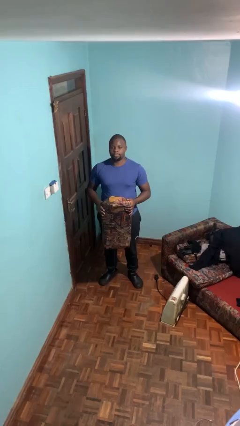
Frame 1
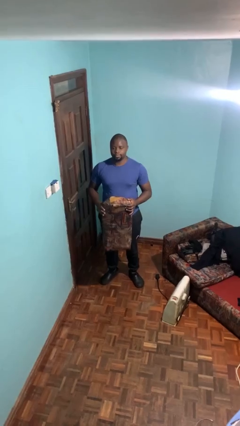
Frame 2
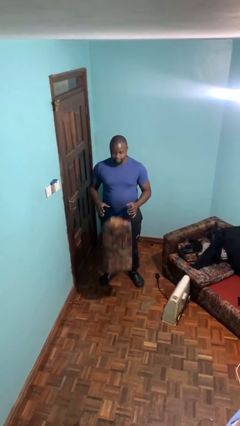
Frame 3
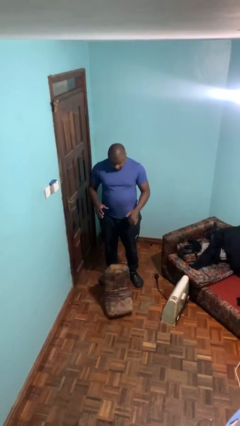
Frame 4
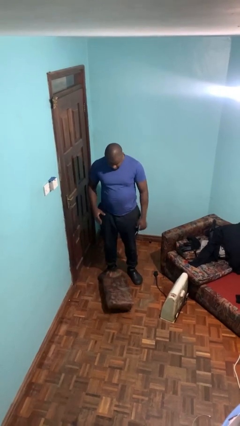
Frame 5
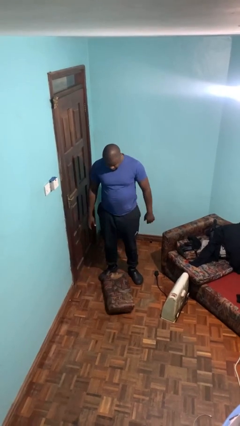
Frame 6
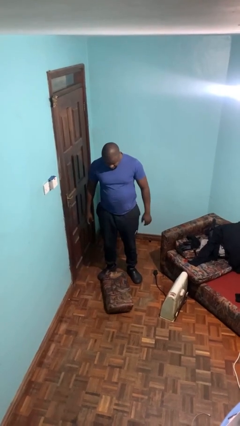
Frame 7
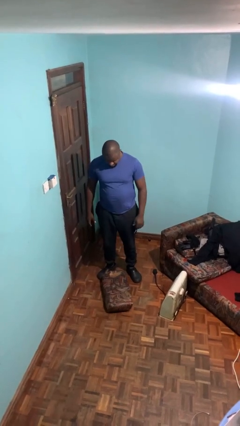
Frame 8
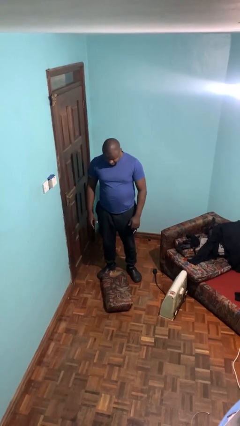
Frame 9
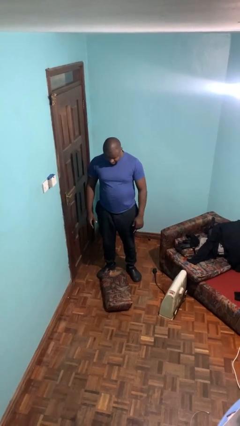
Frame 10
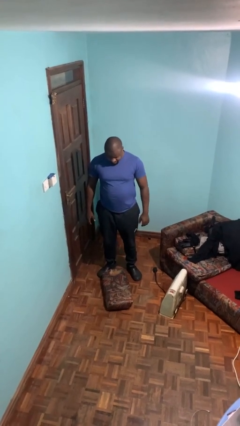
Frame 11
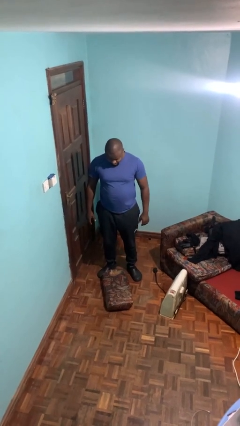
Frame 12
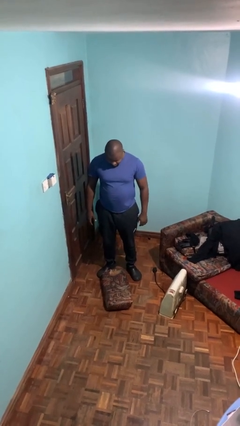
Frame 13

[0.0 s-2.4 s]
person drops object

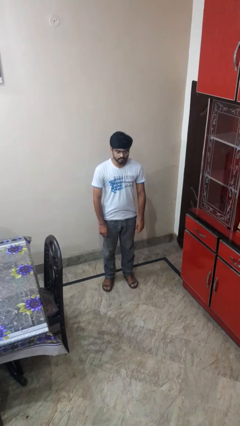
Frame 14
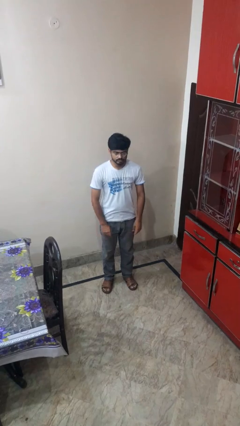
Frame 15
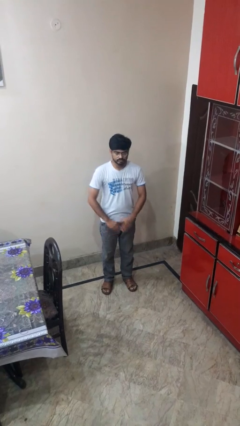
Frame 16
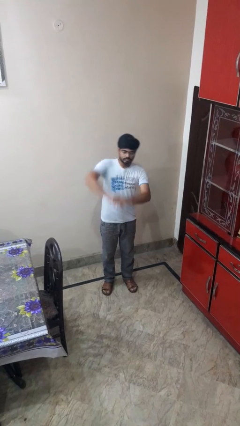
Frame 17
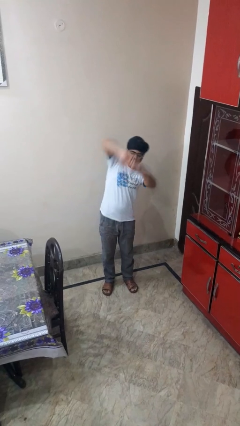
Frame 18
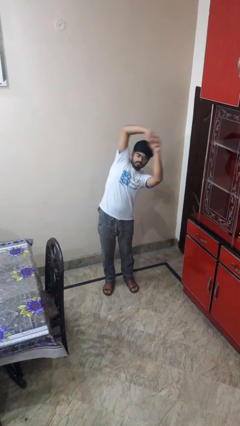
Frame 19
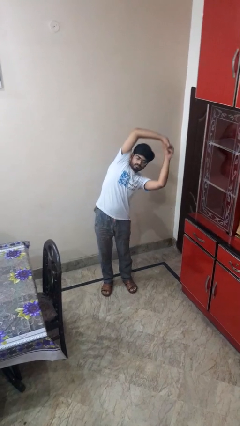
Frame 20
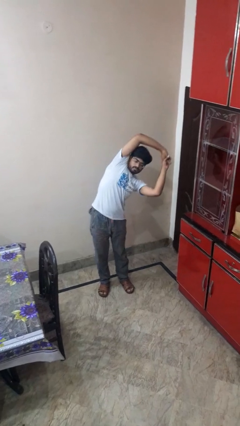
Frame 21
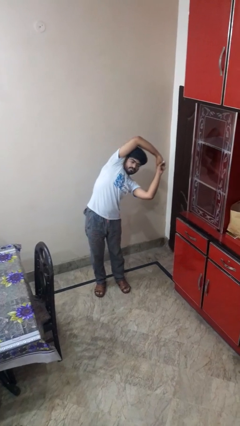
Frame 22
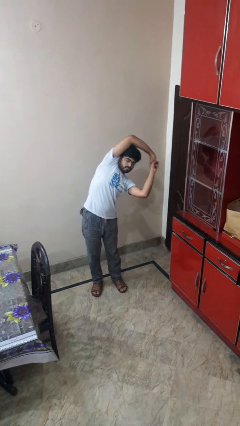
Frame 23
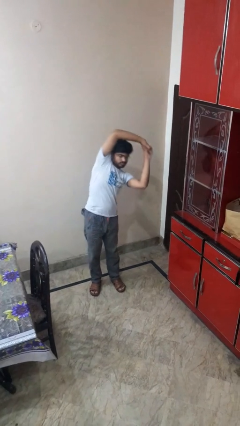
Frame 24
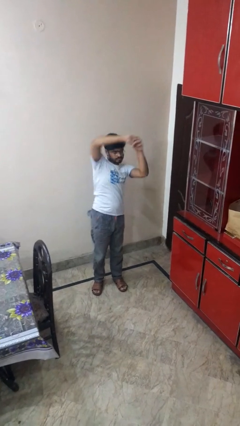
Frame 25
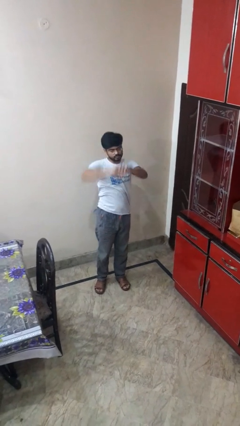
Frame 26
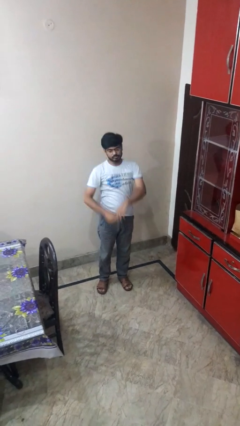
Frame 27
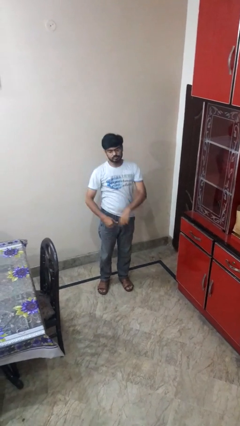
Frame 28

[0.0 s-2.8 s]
person stretches arms to side

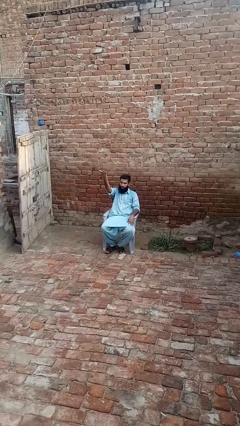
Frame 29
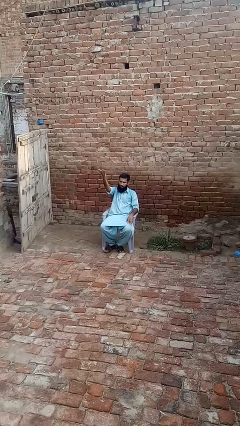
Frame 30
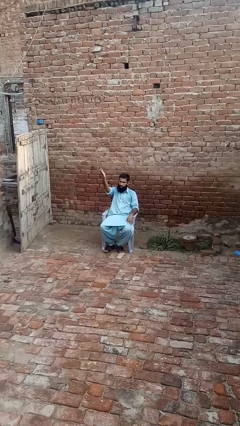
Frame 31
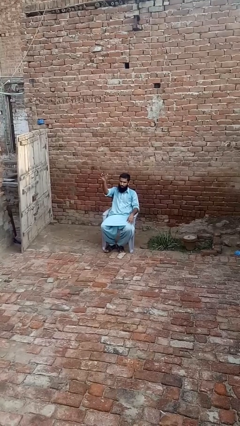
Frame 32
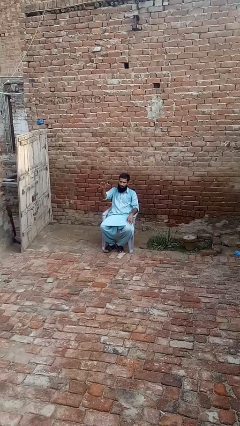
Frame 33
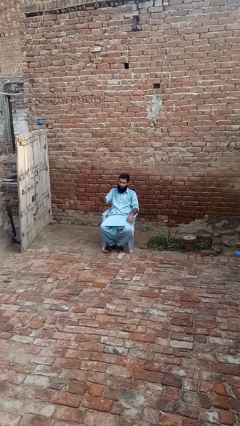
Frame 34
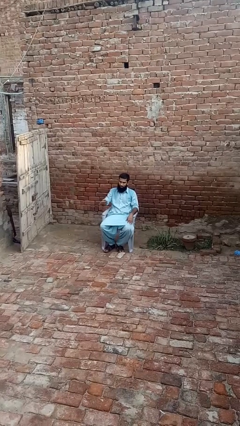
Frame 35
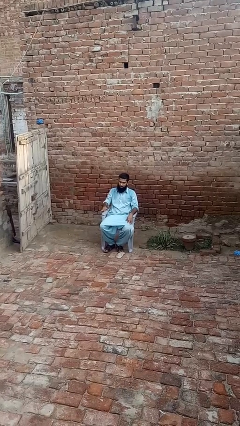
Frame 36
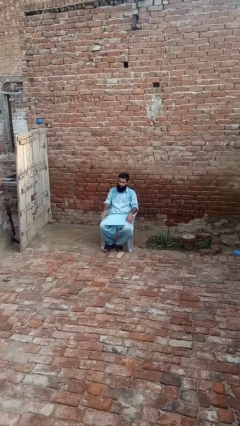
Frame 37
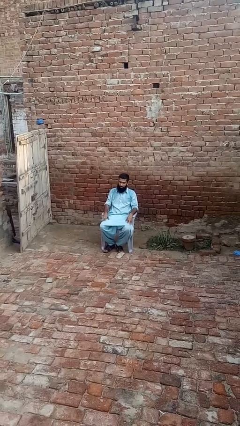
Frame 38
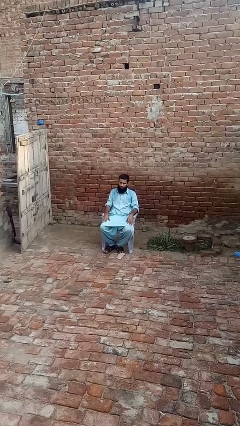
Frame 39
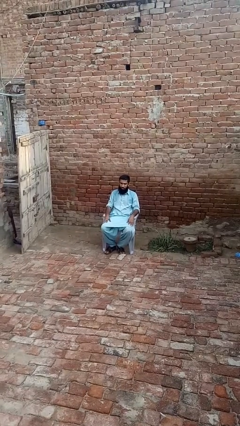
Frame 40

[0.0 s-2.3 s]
person gestures swipe down

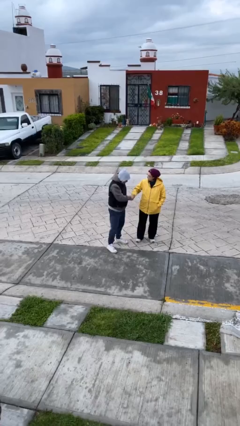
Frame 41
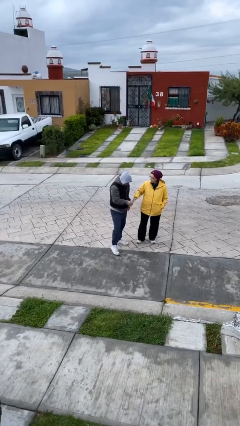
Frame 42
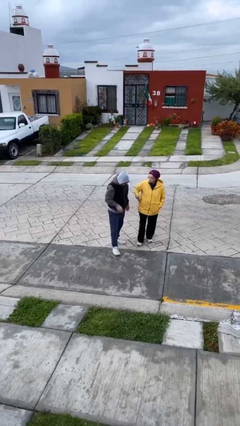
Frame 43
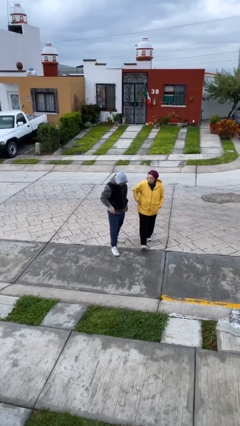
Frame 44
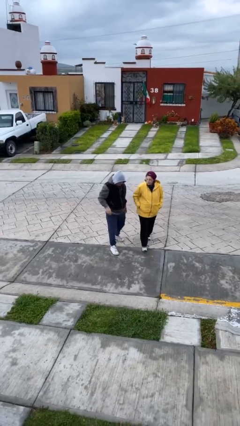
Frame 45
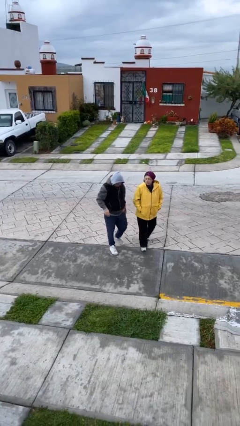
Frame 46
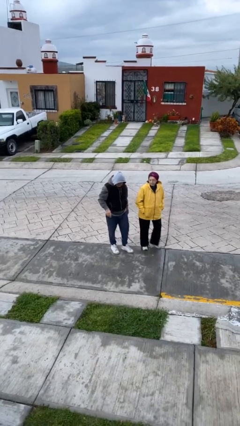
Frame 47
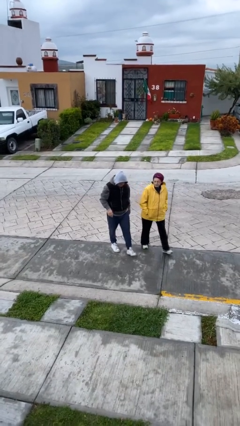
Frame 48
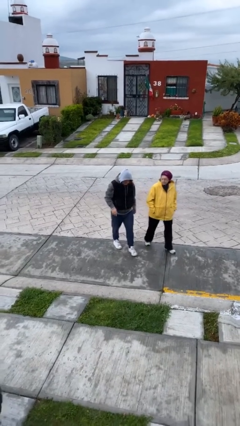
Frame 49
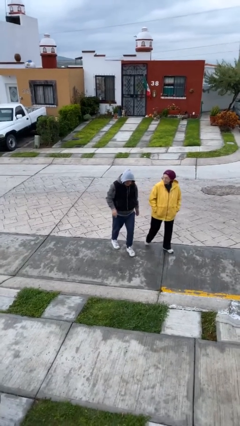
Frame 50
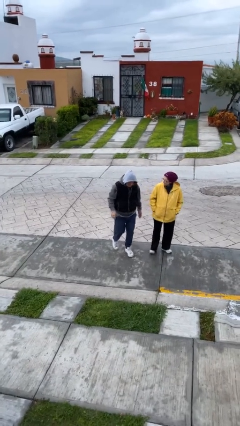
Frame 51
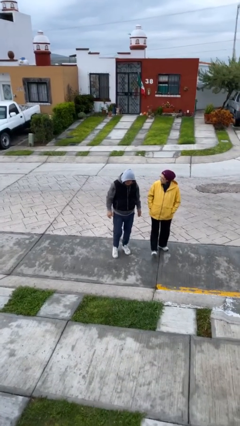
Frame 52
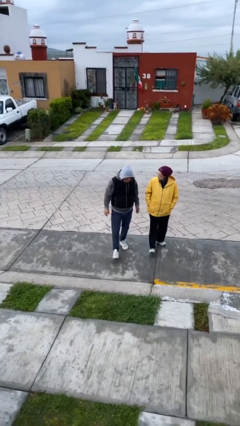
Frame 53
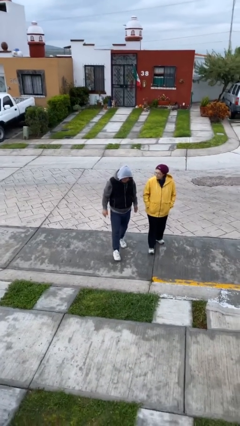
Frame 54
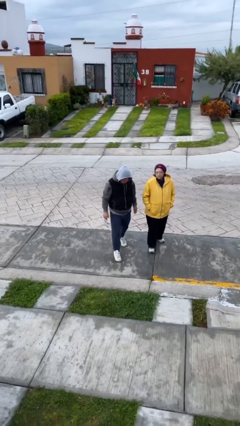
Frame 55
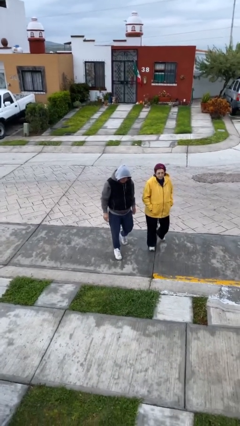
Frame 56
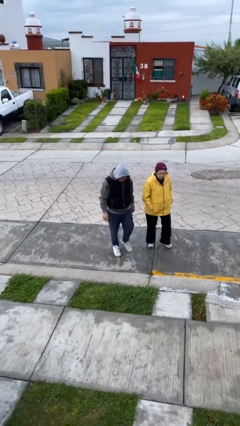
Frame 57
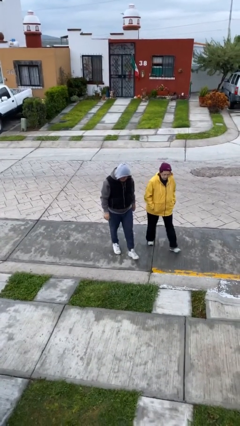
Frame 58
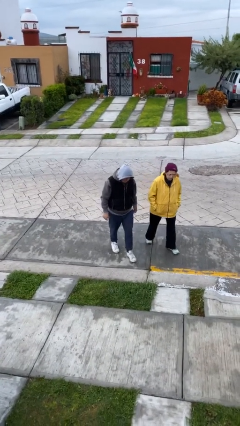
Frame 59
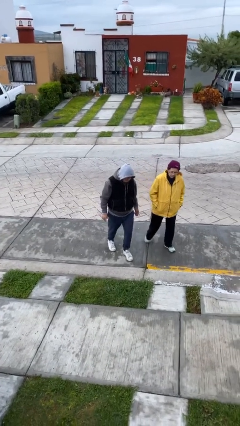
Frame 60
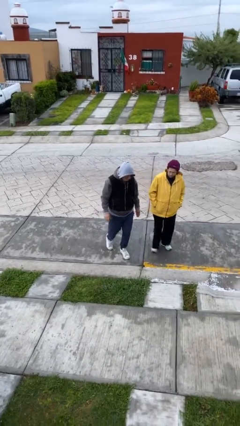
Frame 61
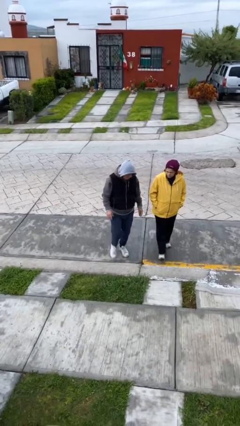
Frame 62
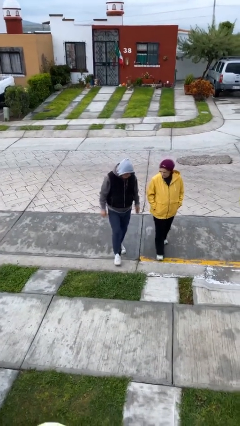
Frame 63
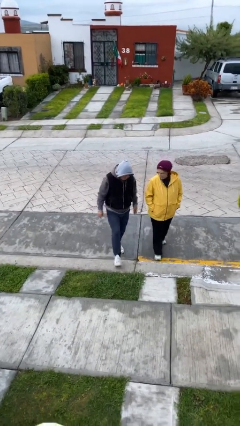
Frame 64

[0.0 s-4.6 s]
person talks to person

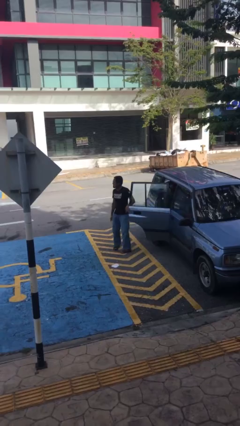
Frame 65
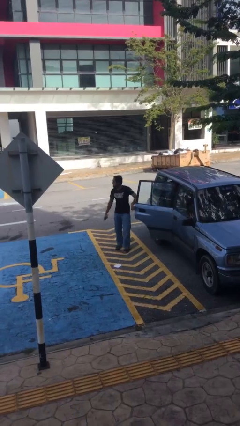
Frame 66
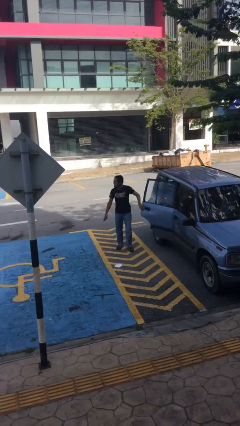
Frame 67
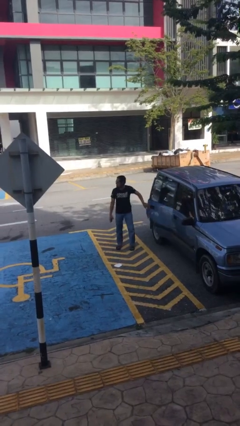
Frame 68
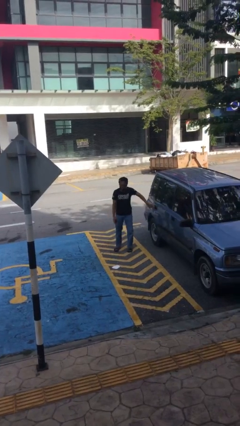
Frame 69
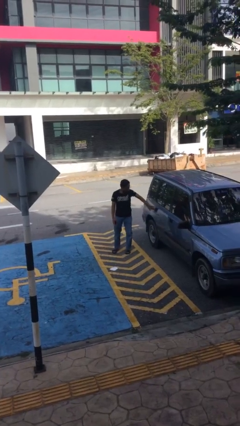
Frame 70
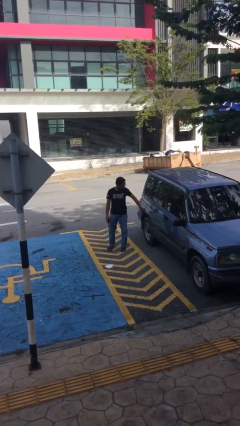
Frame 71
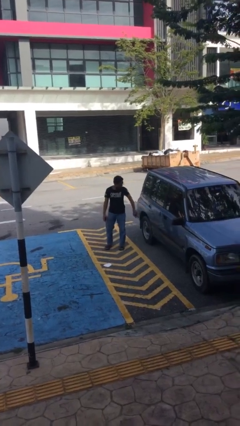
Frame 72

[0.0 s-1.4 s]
person closes car door

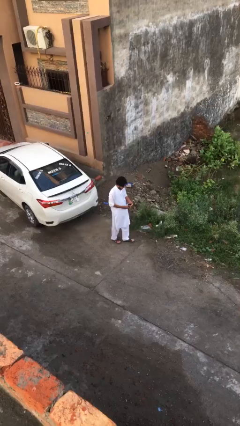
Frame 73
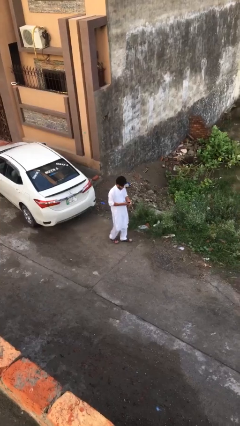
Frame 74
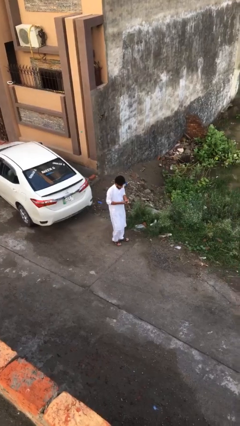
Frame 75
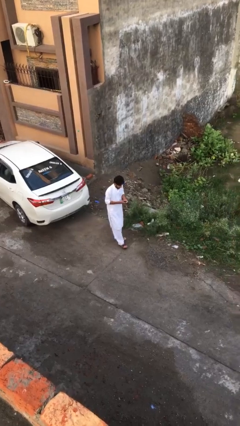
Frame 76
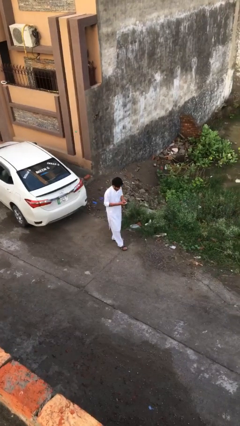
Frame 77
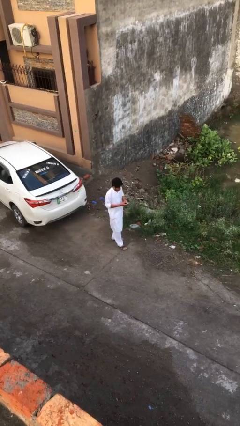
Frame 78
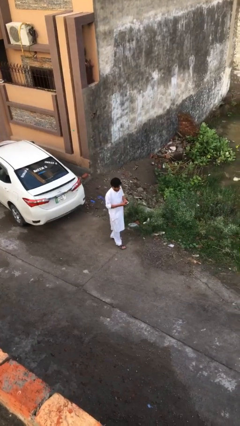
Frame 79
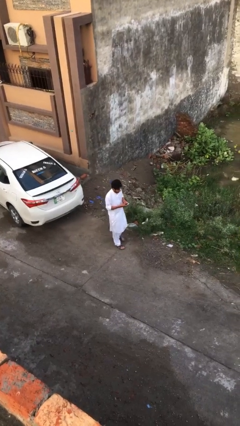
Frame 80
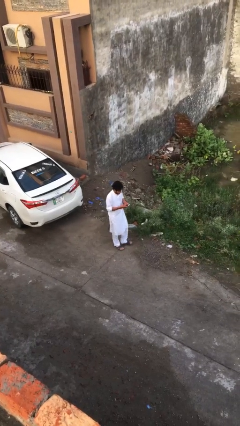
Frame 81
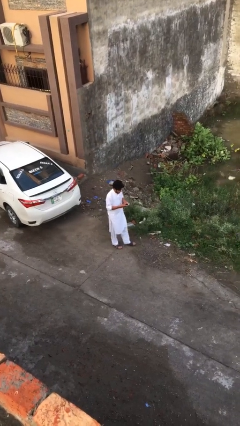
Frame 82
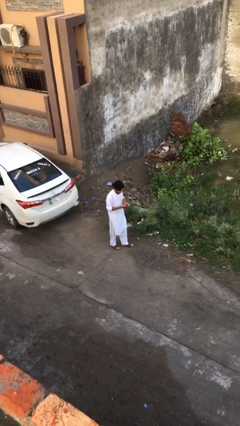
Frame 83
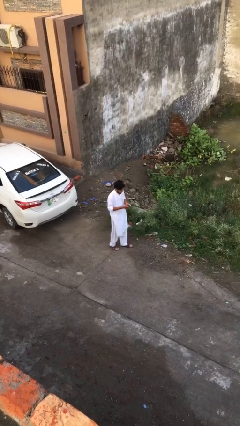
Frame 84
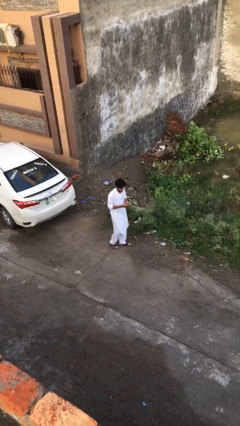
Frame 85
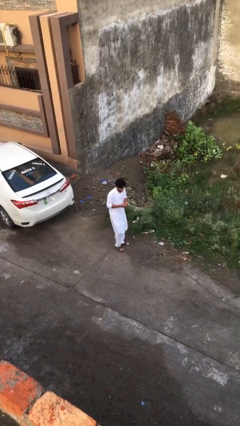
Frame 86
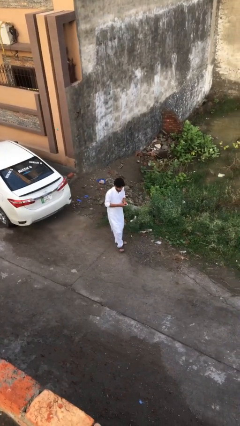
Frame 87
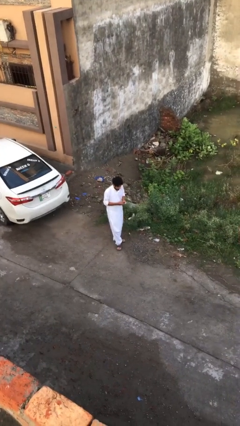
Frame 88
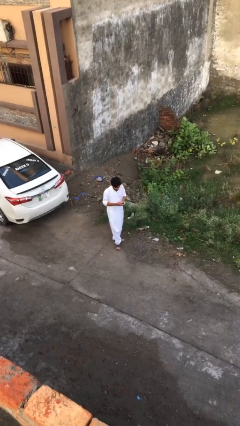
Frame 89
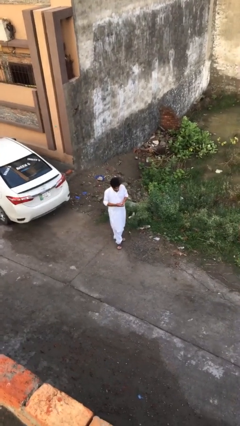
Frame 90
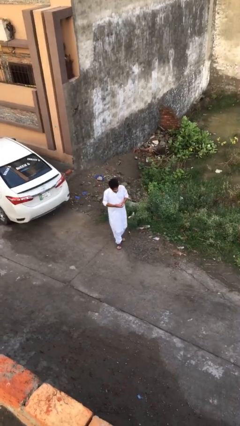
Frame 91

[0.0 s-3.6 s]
person texts on phone

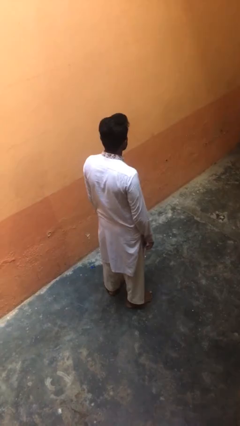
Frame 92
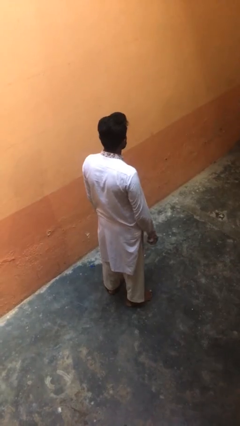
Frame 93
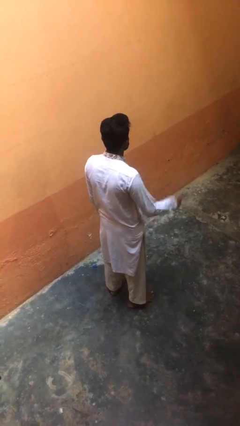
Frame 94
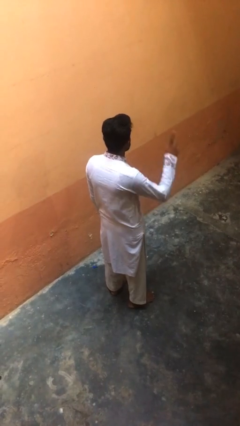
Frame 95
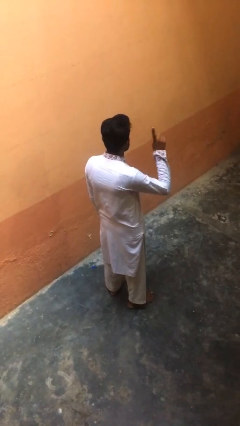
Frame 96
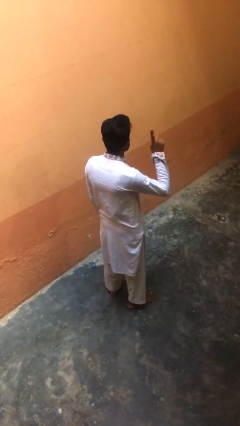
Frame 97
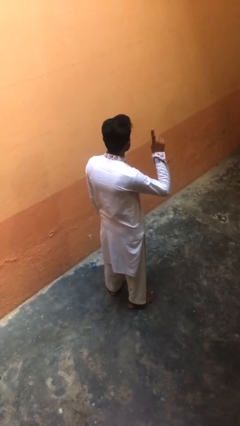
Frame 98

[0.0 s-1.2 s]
person gestures number one
